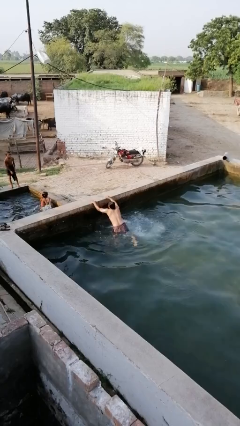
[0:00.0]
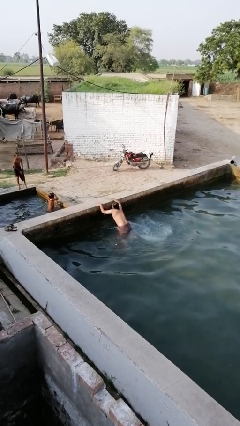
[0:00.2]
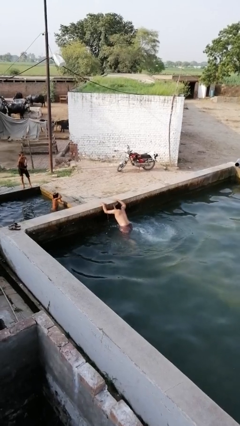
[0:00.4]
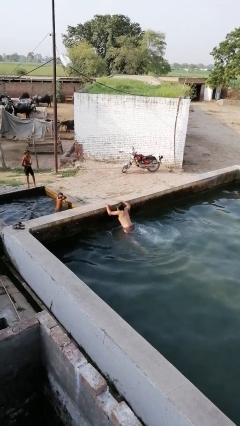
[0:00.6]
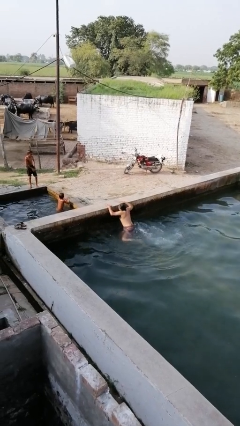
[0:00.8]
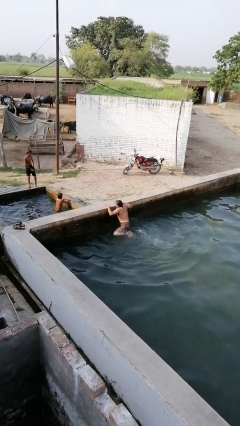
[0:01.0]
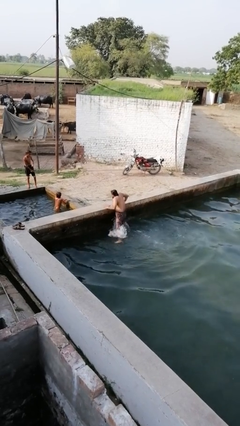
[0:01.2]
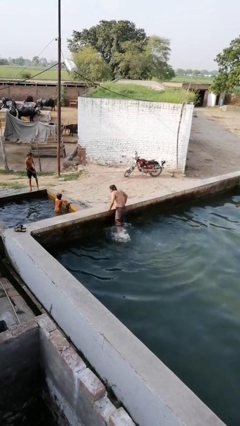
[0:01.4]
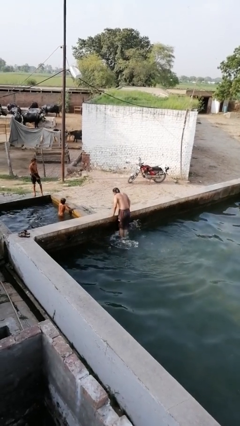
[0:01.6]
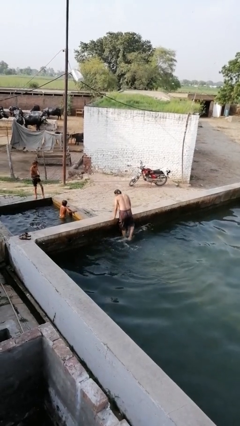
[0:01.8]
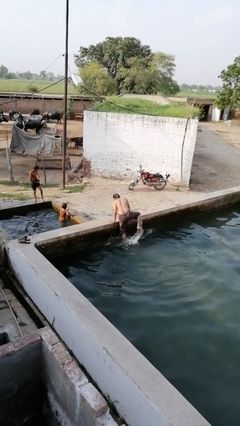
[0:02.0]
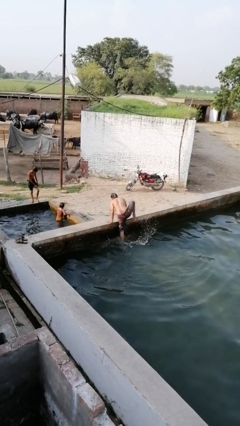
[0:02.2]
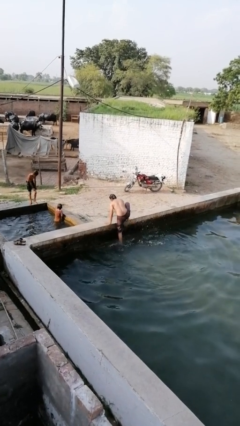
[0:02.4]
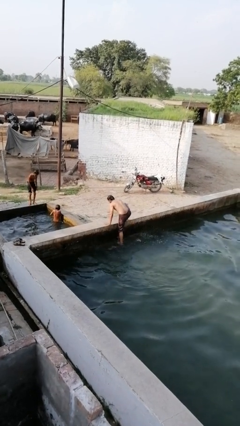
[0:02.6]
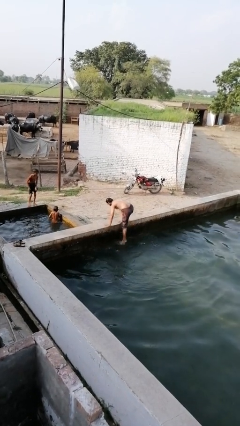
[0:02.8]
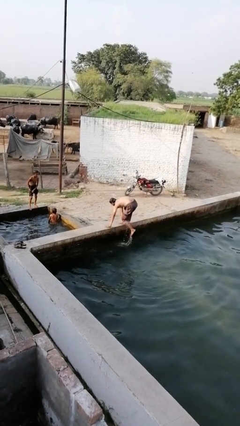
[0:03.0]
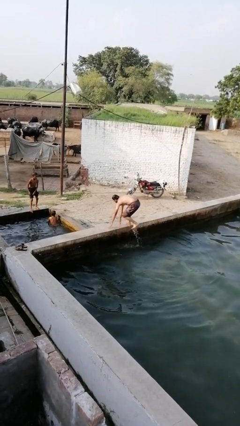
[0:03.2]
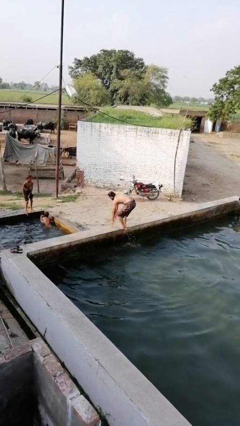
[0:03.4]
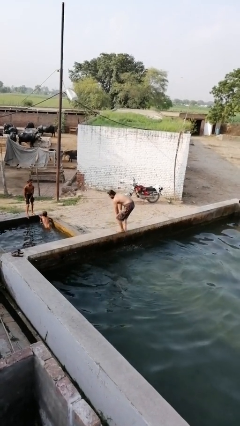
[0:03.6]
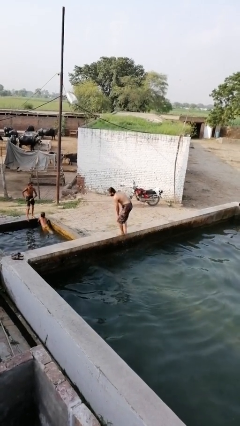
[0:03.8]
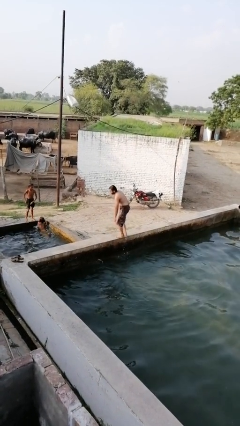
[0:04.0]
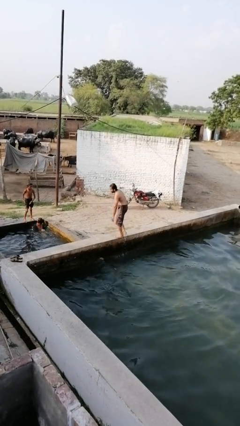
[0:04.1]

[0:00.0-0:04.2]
person exits pool

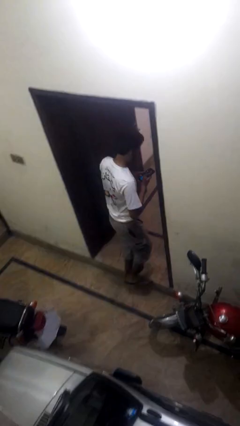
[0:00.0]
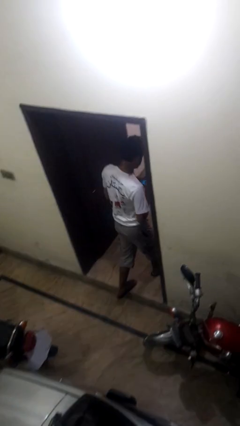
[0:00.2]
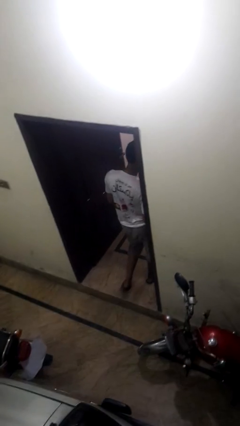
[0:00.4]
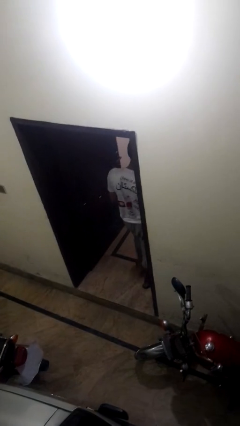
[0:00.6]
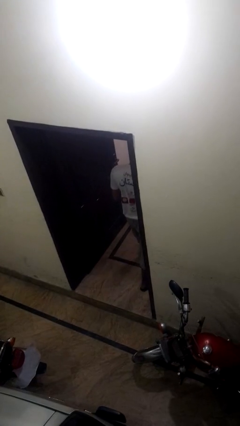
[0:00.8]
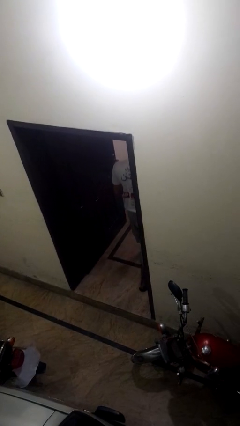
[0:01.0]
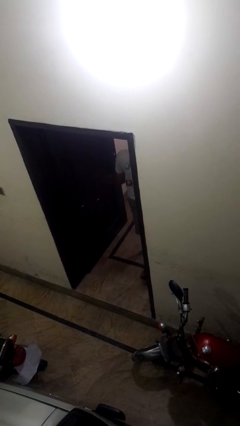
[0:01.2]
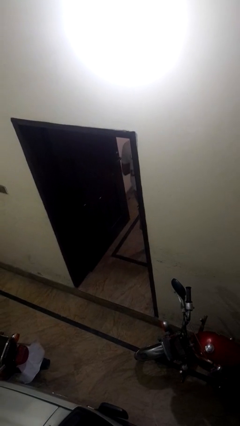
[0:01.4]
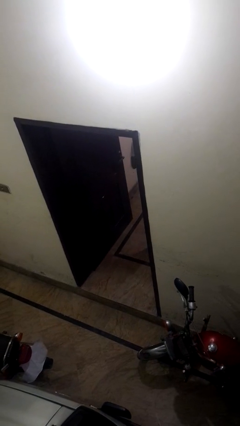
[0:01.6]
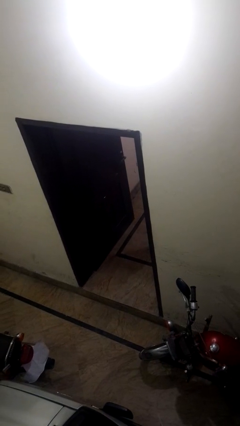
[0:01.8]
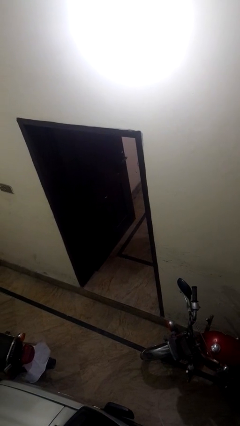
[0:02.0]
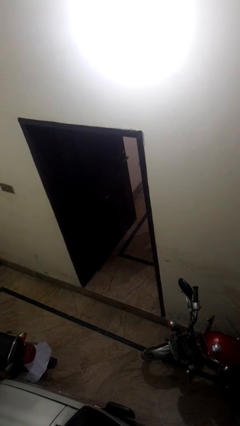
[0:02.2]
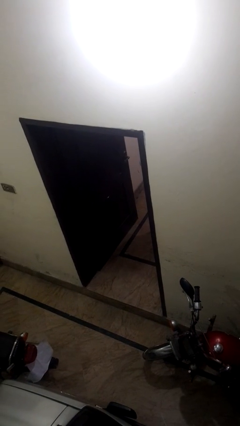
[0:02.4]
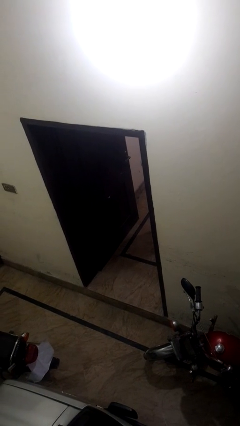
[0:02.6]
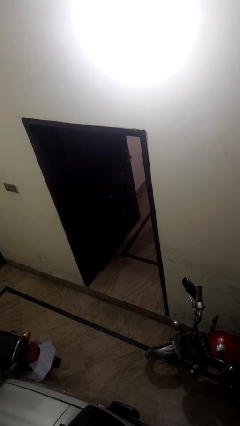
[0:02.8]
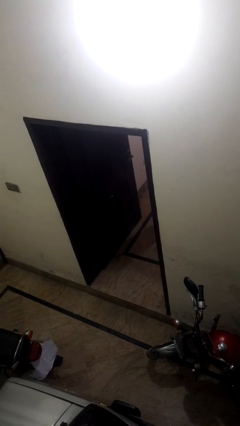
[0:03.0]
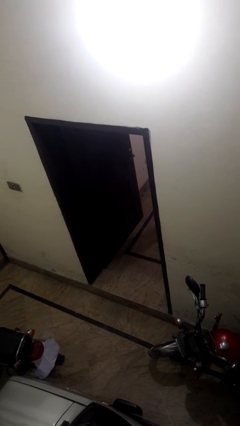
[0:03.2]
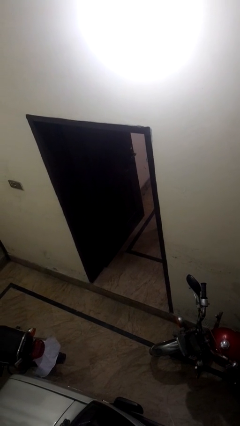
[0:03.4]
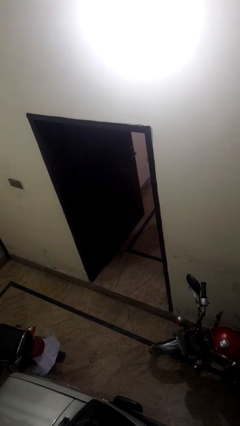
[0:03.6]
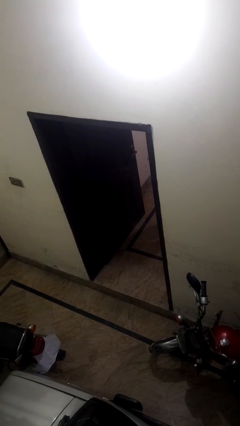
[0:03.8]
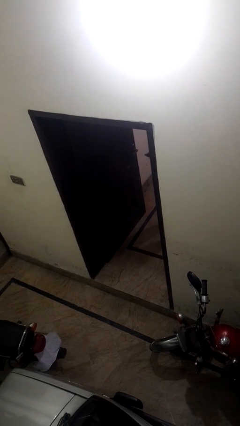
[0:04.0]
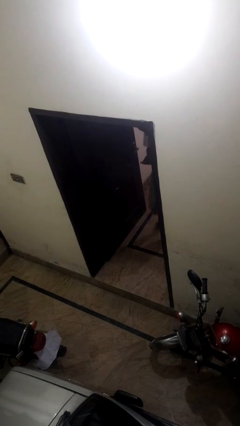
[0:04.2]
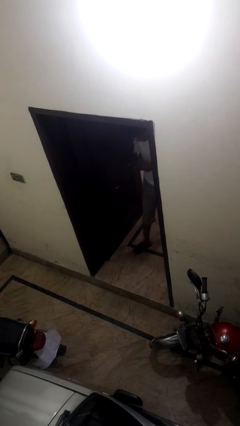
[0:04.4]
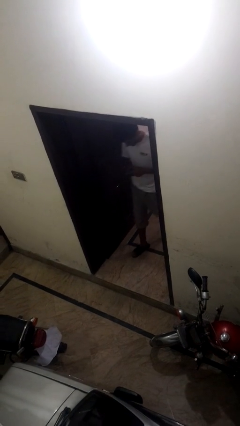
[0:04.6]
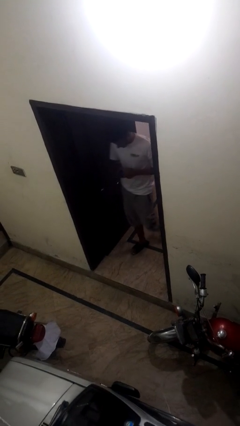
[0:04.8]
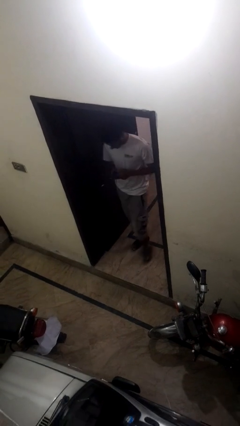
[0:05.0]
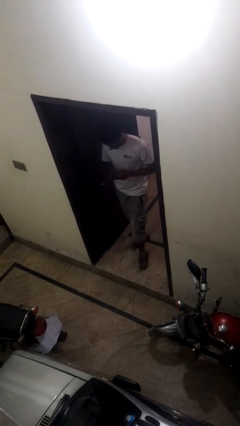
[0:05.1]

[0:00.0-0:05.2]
person exits scene through structure

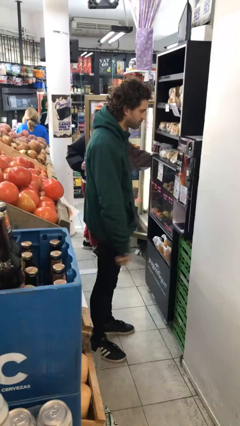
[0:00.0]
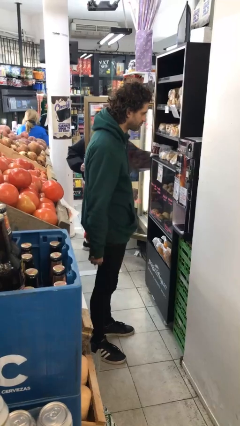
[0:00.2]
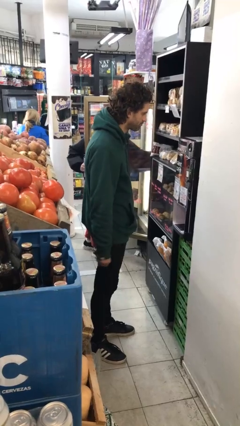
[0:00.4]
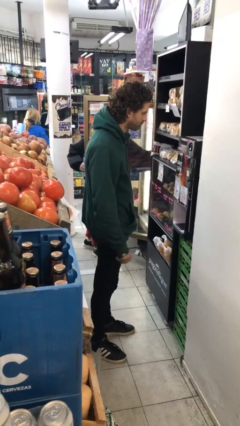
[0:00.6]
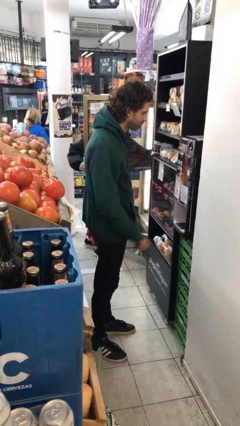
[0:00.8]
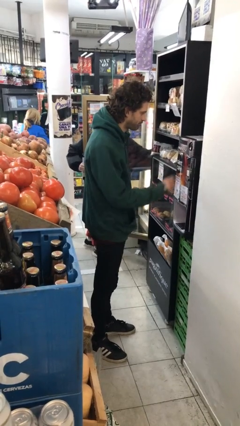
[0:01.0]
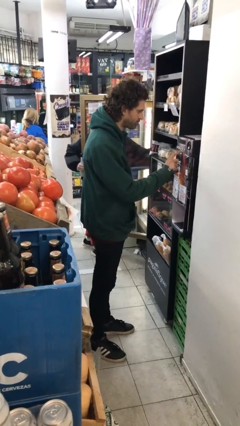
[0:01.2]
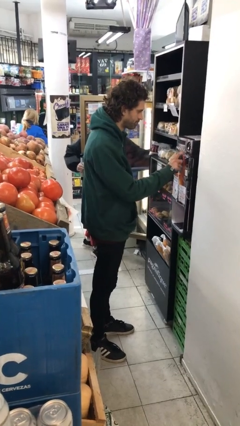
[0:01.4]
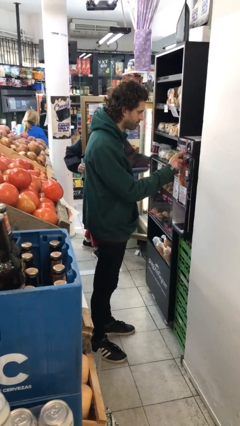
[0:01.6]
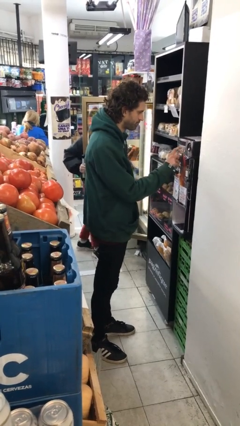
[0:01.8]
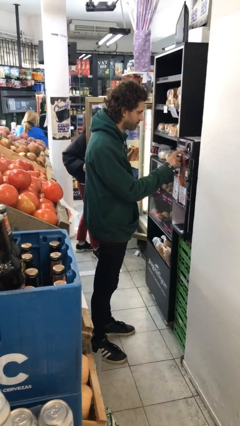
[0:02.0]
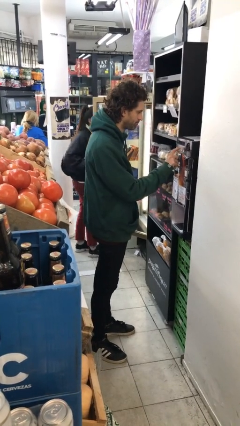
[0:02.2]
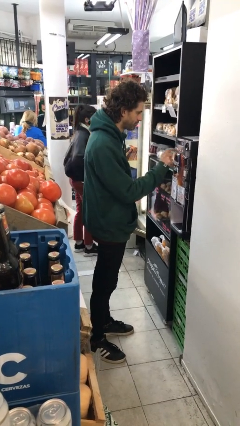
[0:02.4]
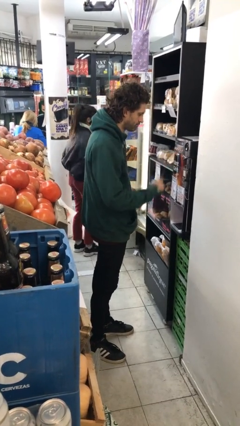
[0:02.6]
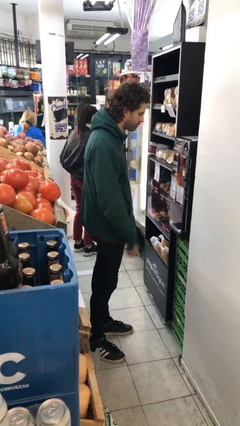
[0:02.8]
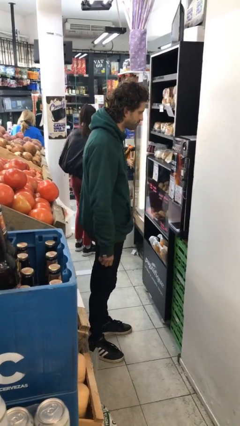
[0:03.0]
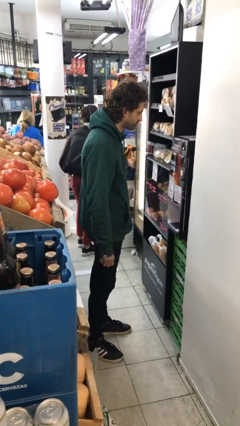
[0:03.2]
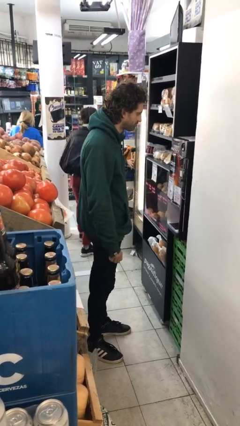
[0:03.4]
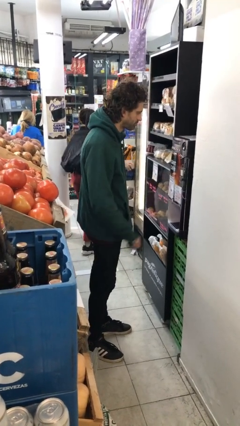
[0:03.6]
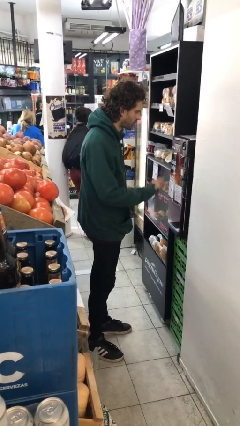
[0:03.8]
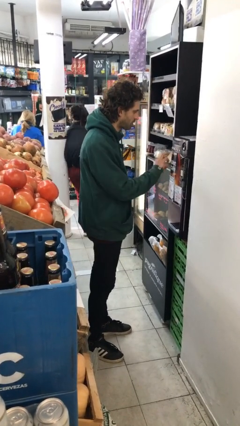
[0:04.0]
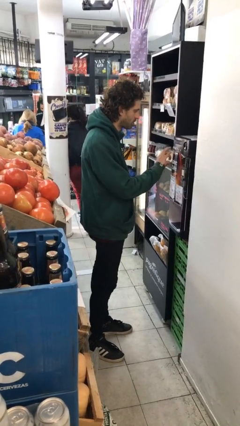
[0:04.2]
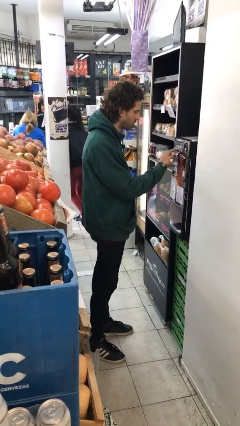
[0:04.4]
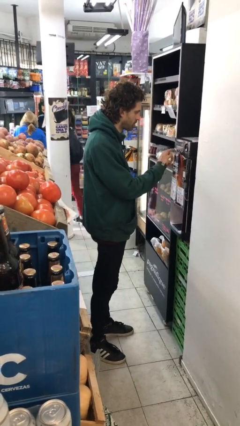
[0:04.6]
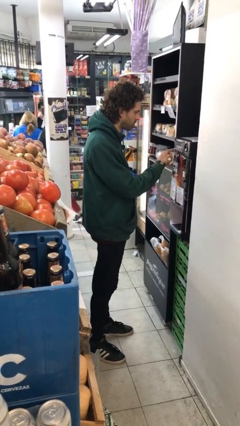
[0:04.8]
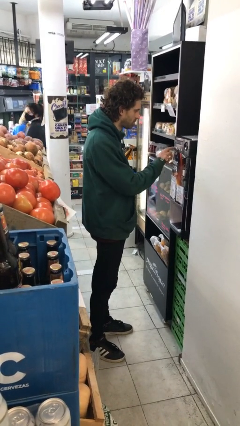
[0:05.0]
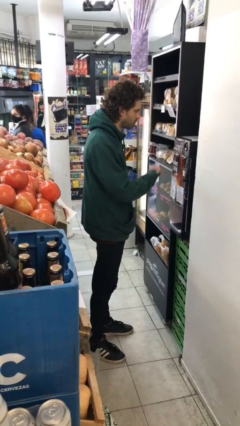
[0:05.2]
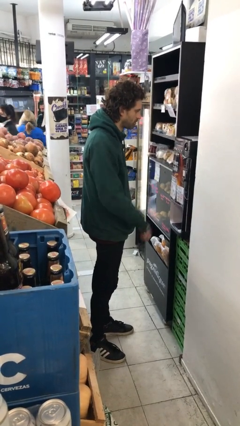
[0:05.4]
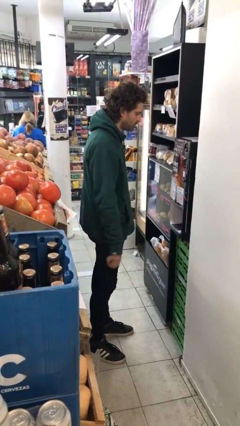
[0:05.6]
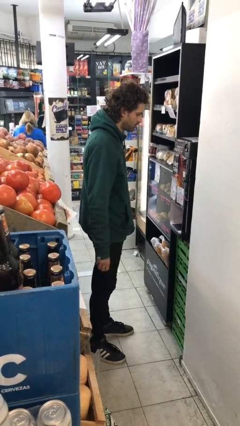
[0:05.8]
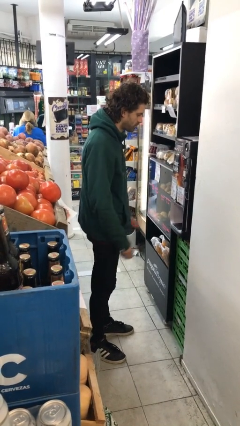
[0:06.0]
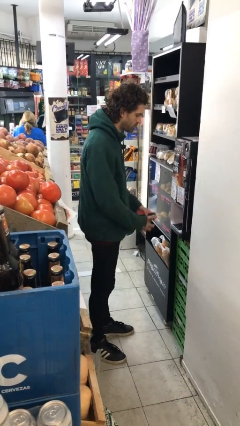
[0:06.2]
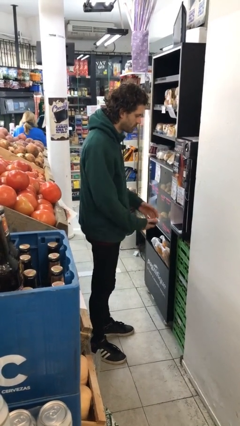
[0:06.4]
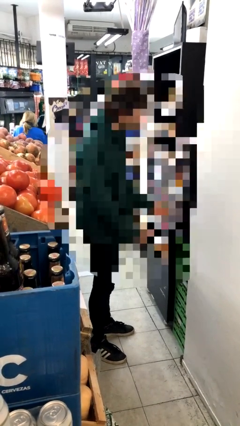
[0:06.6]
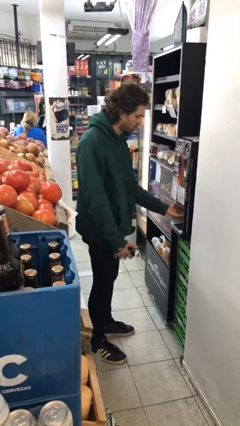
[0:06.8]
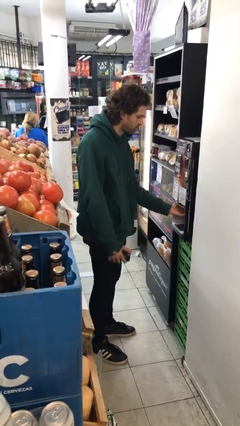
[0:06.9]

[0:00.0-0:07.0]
person purchases from machine

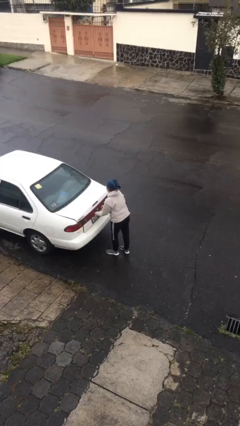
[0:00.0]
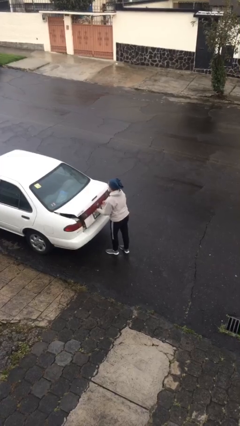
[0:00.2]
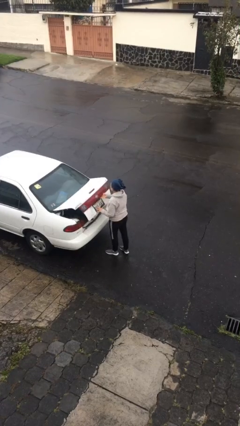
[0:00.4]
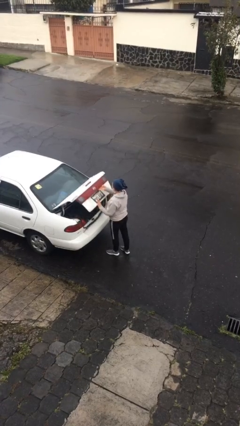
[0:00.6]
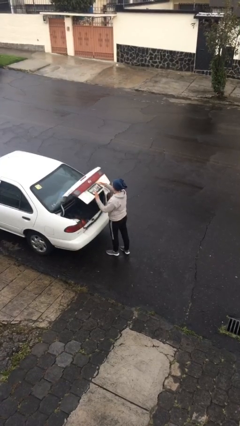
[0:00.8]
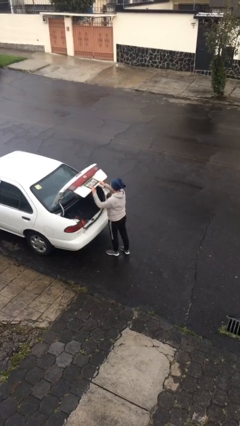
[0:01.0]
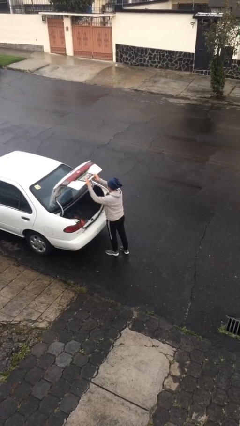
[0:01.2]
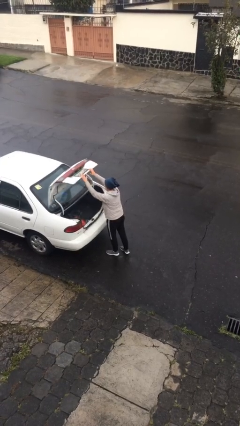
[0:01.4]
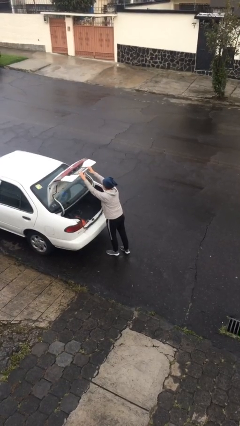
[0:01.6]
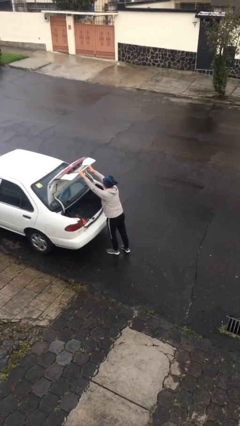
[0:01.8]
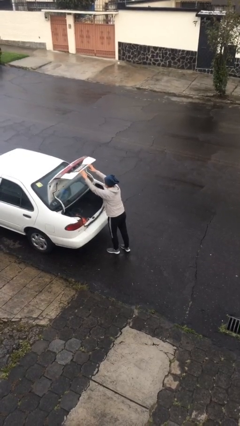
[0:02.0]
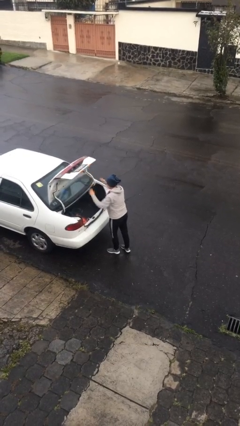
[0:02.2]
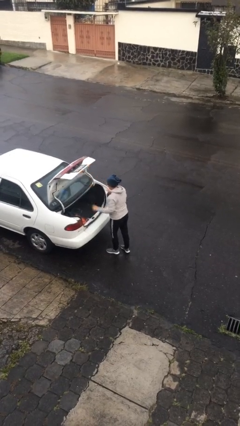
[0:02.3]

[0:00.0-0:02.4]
person opens car trunk
